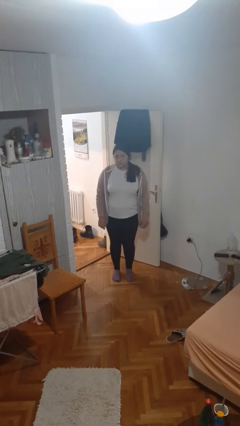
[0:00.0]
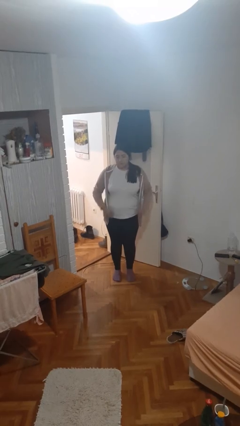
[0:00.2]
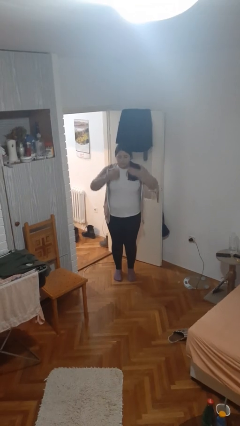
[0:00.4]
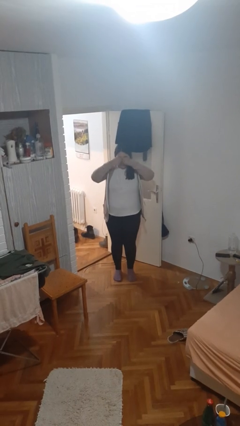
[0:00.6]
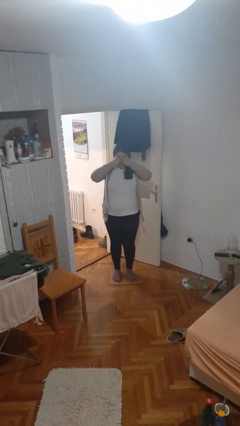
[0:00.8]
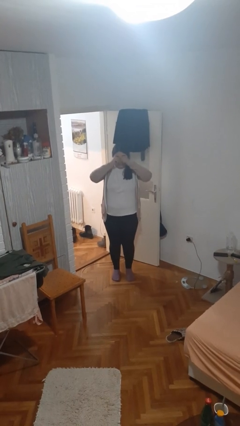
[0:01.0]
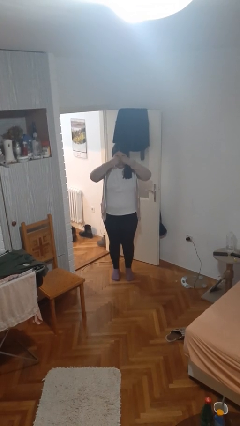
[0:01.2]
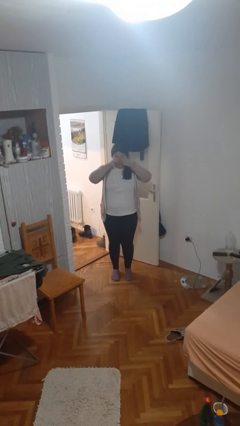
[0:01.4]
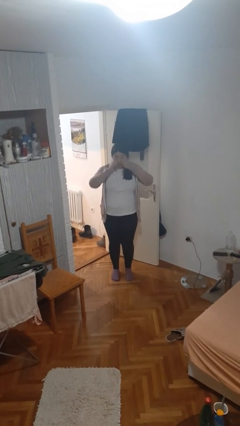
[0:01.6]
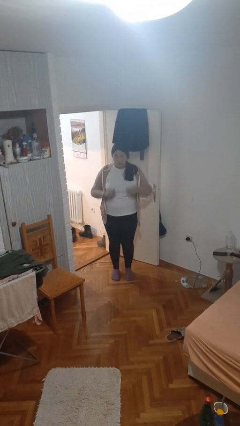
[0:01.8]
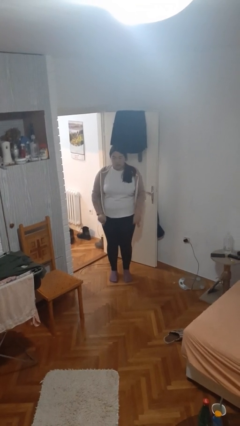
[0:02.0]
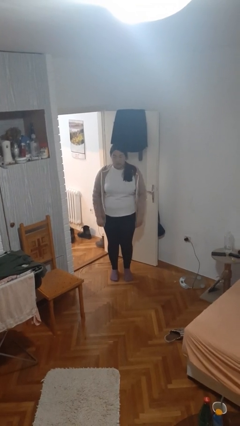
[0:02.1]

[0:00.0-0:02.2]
person rubs eyes

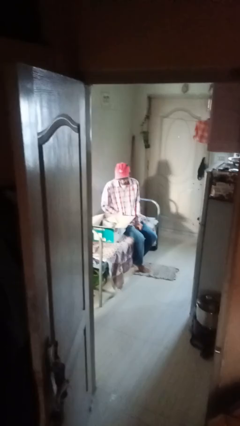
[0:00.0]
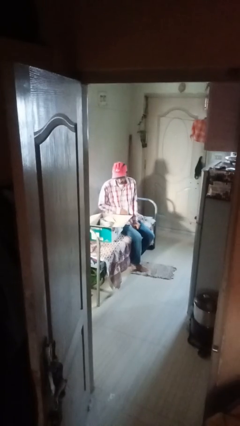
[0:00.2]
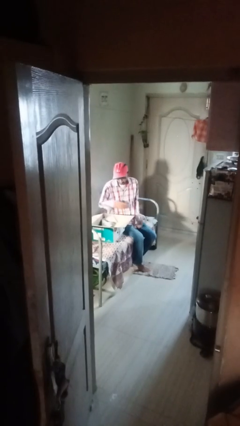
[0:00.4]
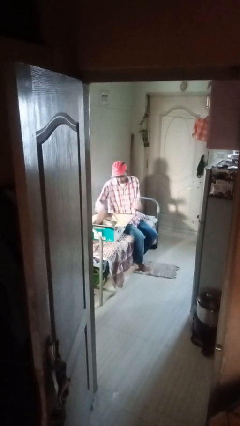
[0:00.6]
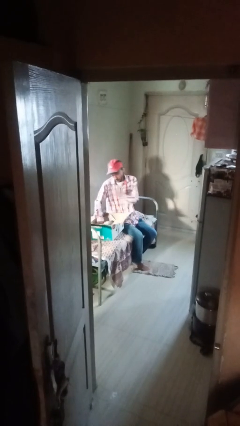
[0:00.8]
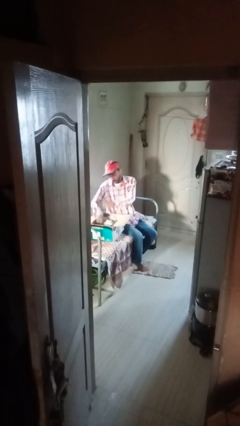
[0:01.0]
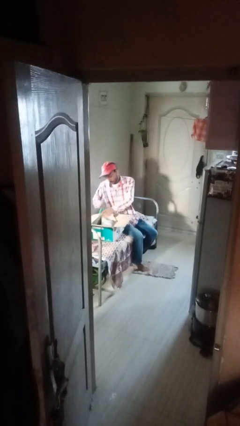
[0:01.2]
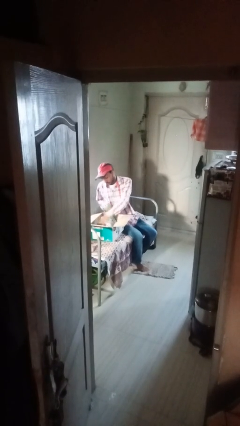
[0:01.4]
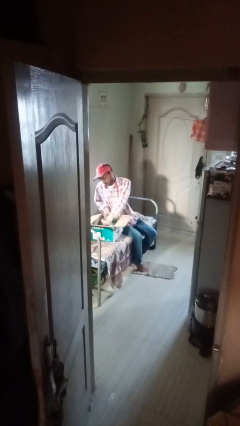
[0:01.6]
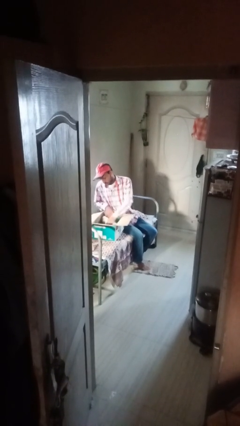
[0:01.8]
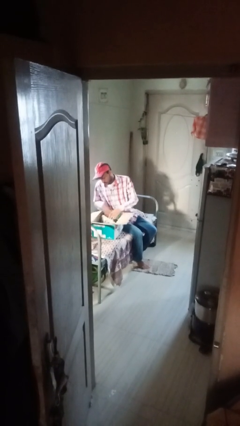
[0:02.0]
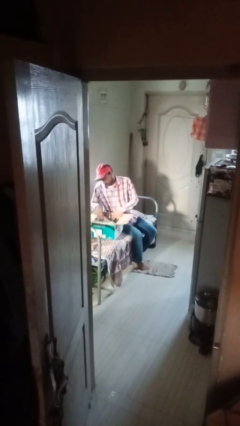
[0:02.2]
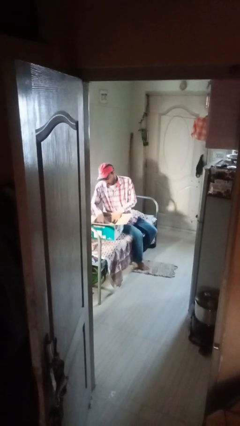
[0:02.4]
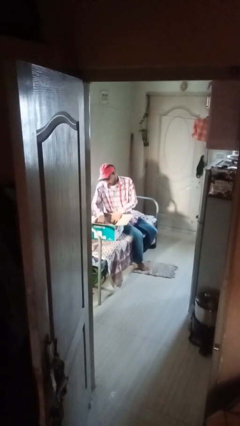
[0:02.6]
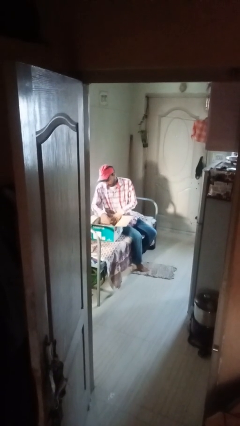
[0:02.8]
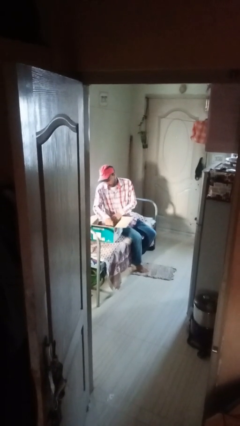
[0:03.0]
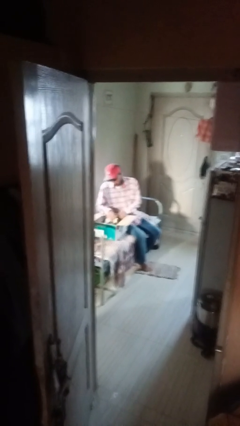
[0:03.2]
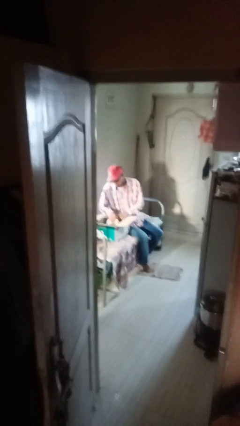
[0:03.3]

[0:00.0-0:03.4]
person searches in box

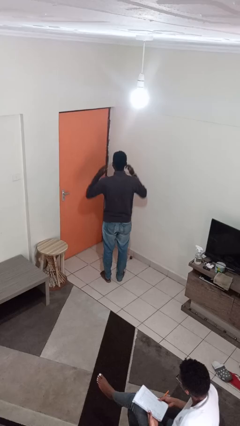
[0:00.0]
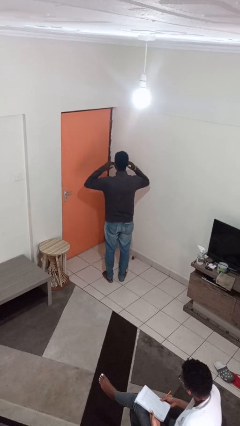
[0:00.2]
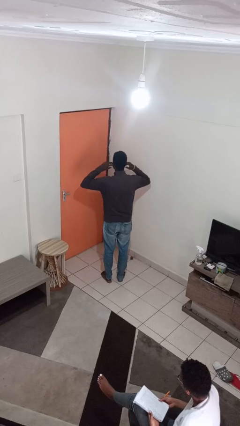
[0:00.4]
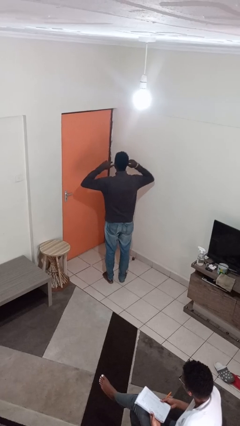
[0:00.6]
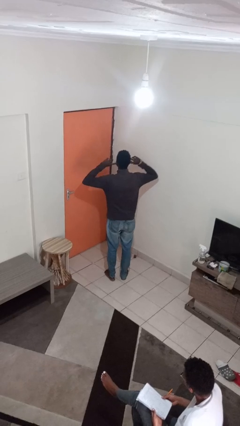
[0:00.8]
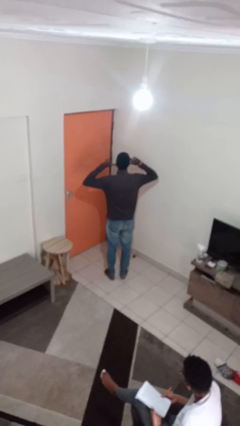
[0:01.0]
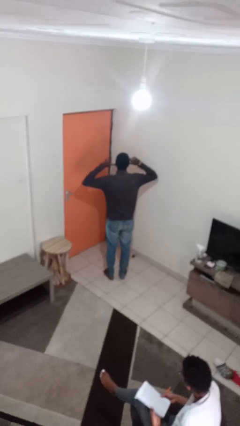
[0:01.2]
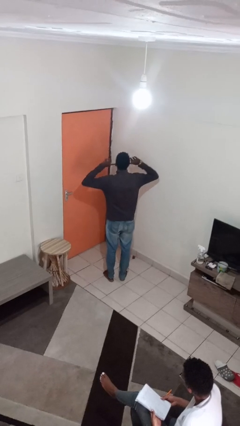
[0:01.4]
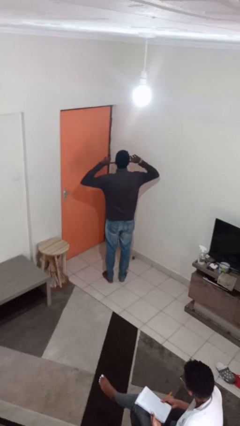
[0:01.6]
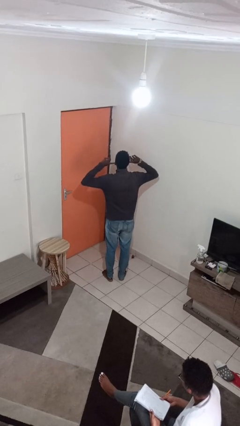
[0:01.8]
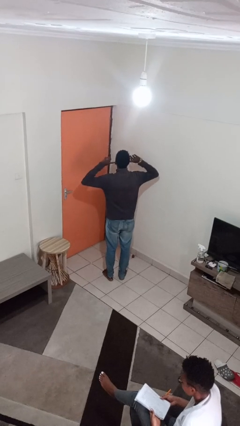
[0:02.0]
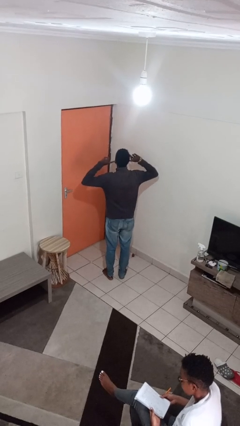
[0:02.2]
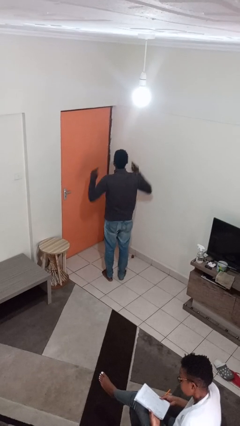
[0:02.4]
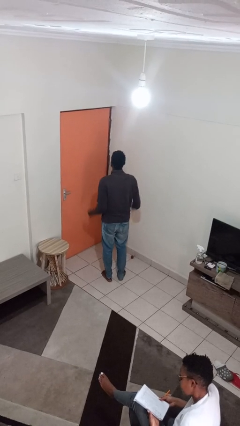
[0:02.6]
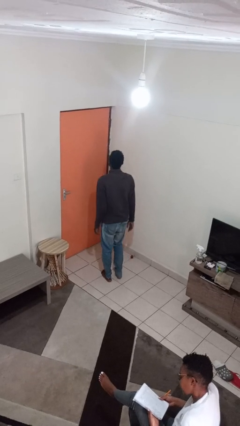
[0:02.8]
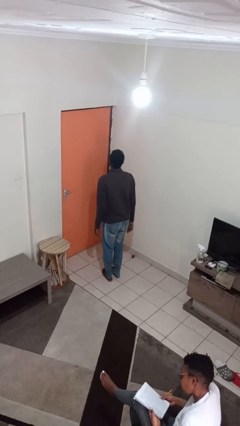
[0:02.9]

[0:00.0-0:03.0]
person puts fingers in ear

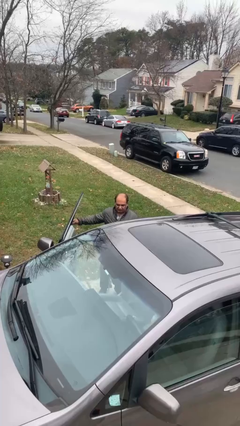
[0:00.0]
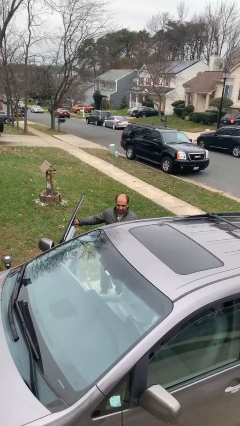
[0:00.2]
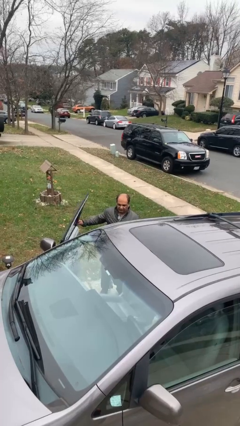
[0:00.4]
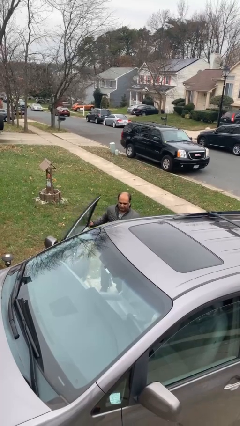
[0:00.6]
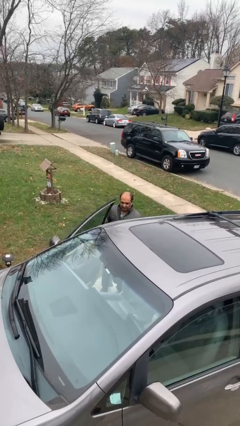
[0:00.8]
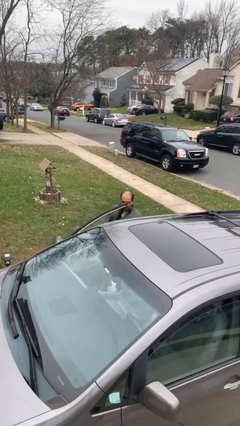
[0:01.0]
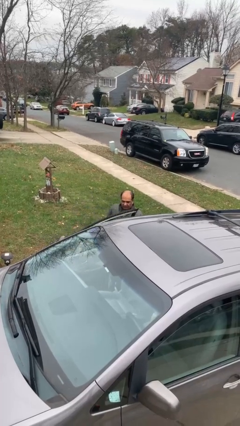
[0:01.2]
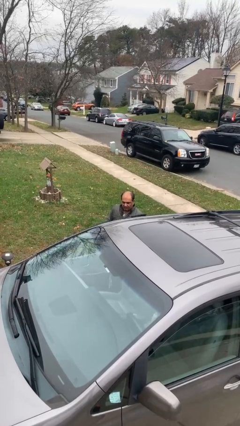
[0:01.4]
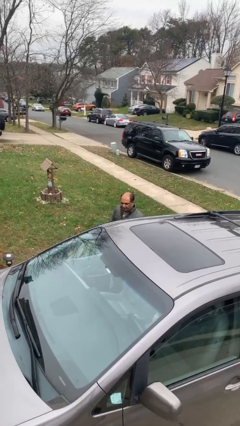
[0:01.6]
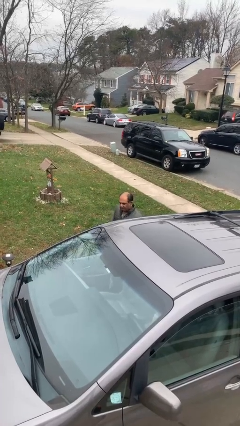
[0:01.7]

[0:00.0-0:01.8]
person closes car door

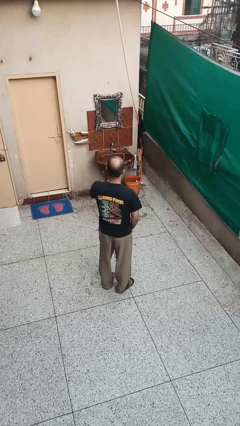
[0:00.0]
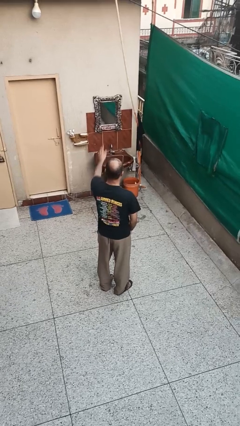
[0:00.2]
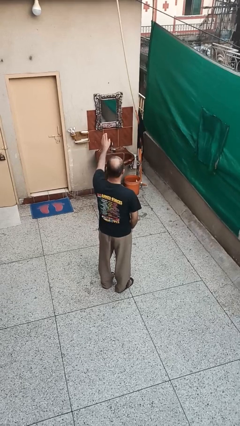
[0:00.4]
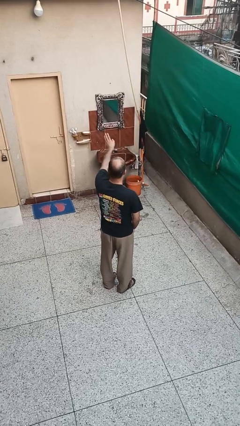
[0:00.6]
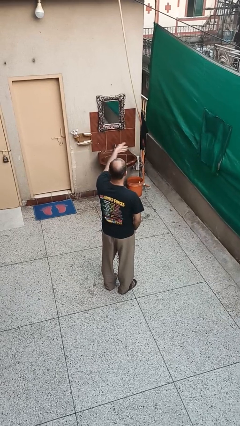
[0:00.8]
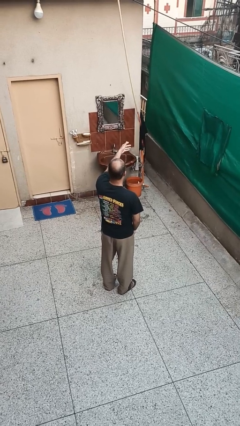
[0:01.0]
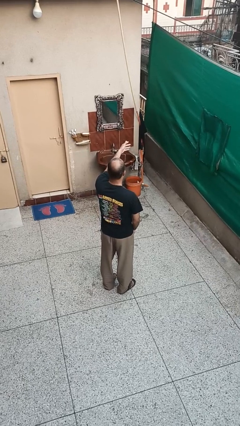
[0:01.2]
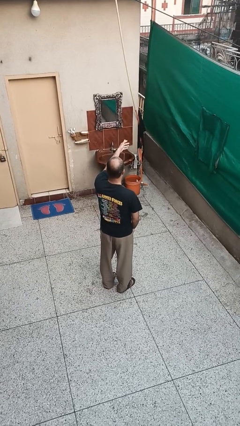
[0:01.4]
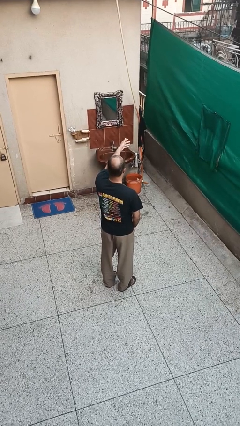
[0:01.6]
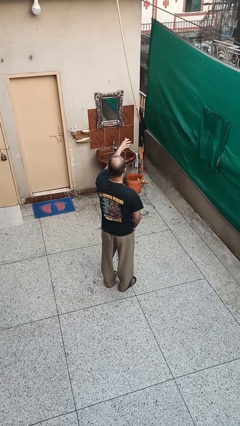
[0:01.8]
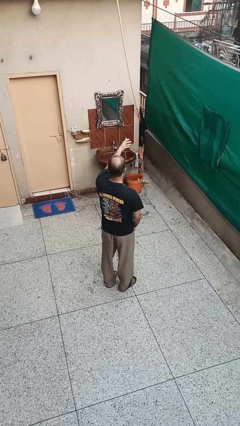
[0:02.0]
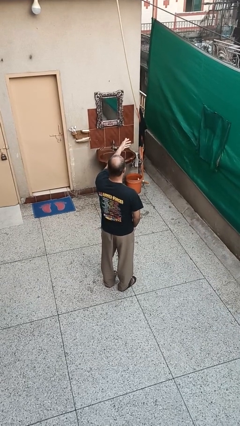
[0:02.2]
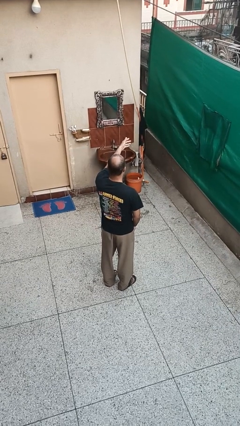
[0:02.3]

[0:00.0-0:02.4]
person gestures swipe right

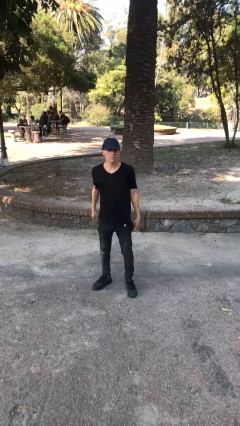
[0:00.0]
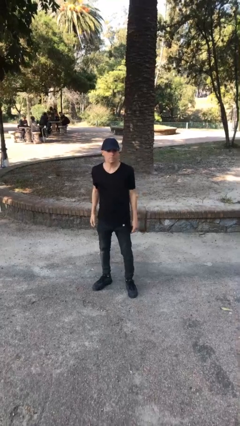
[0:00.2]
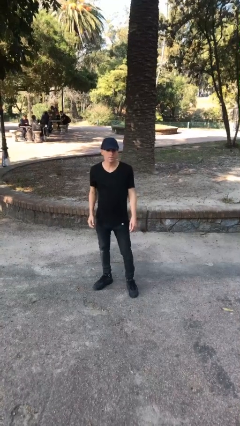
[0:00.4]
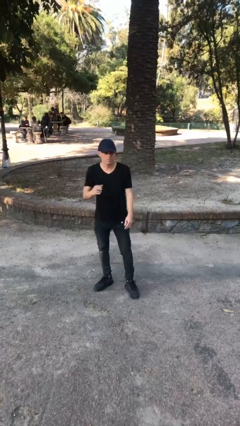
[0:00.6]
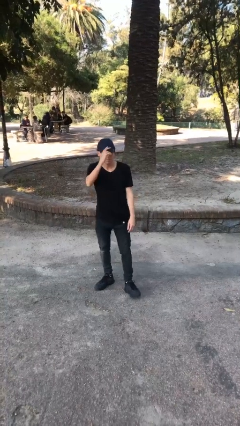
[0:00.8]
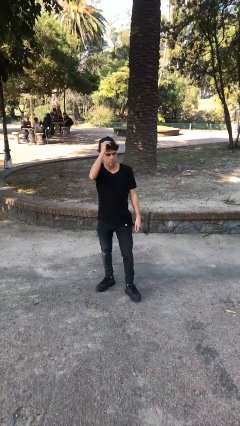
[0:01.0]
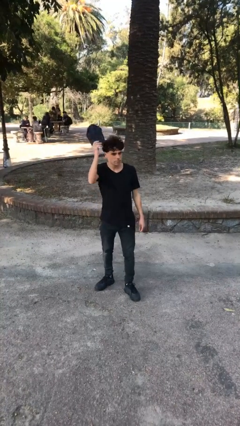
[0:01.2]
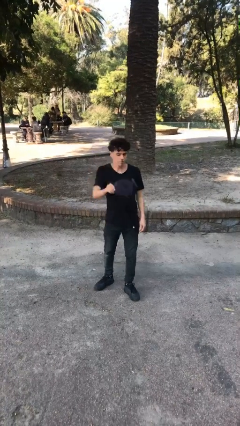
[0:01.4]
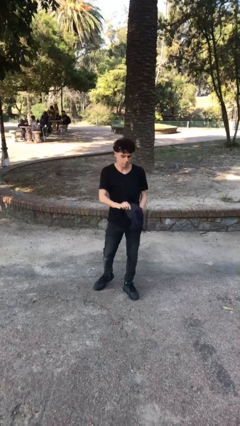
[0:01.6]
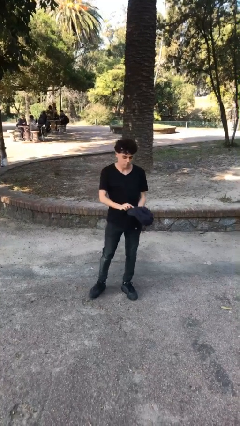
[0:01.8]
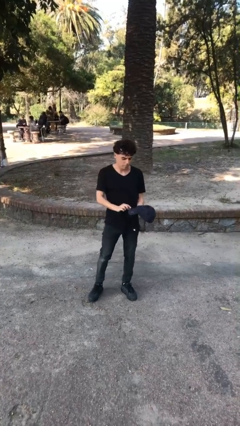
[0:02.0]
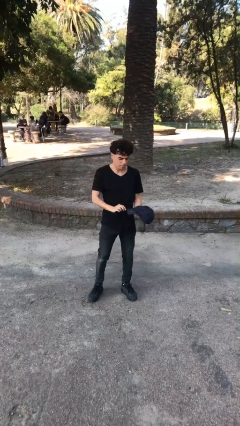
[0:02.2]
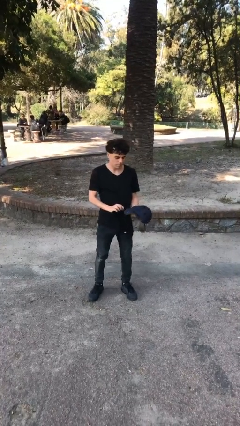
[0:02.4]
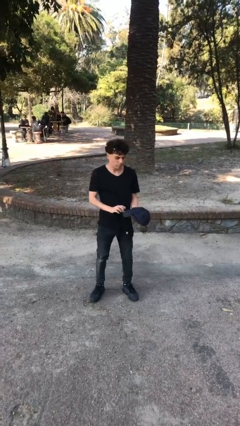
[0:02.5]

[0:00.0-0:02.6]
person takes off hat

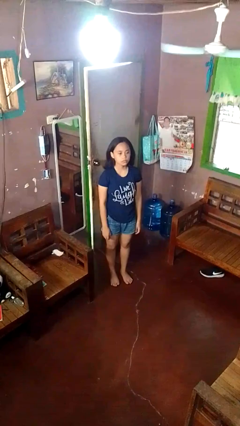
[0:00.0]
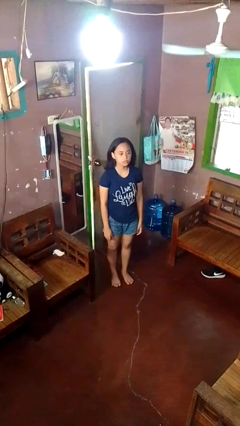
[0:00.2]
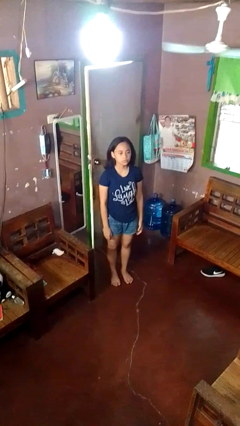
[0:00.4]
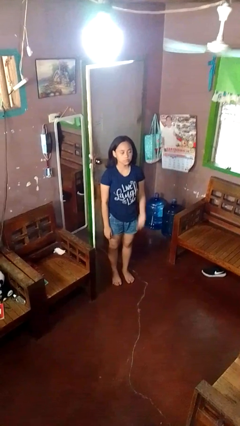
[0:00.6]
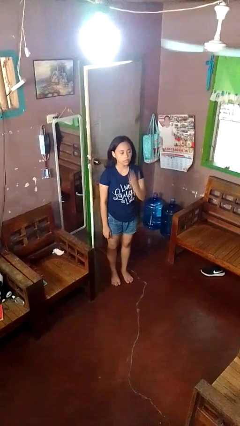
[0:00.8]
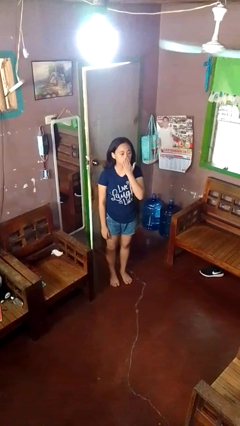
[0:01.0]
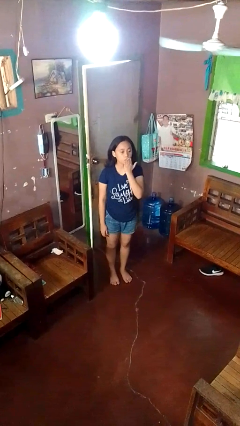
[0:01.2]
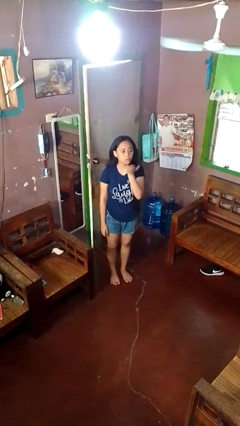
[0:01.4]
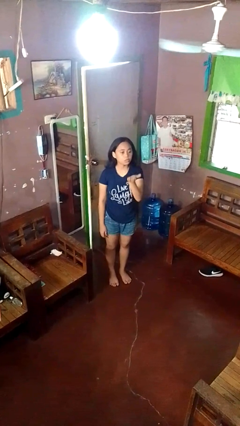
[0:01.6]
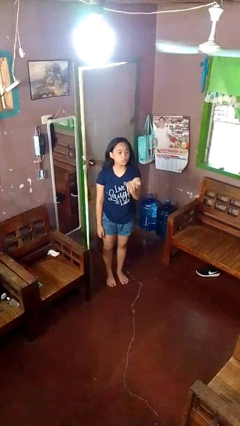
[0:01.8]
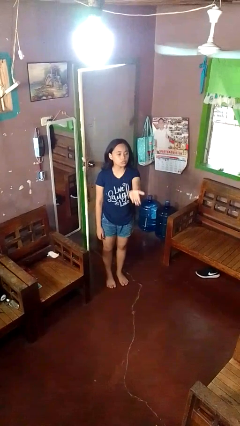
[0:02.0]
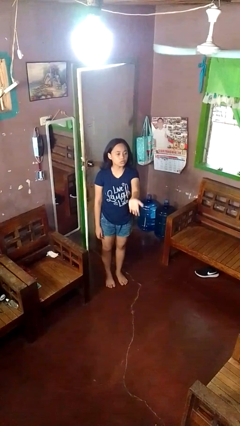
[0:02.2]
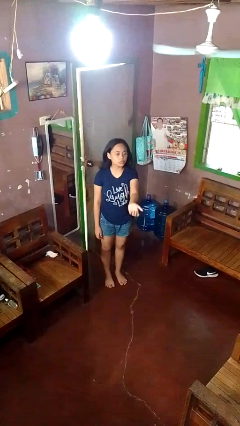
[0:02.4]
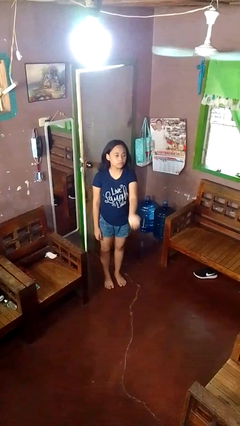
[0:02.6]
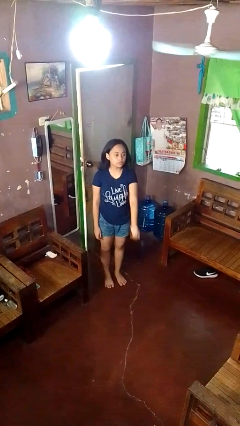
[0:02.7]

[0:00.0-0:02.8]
person gestures blow kiss
